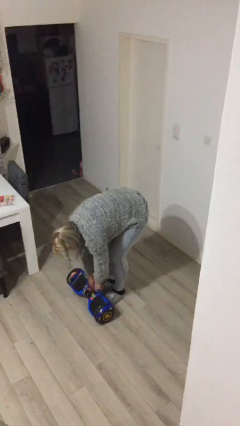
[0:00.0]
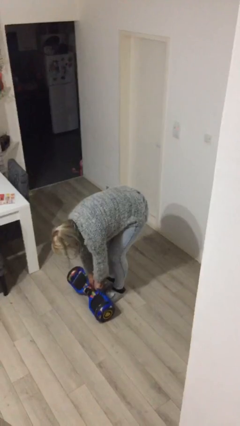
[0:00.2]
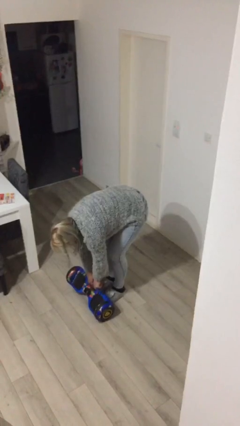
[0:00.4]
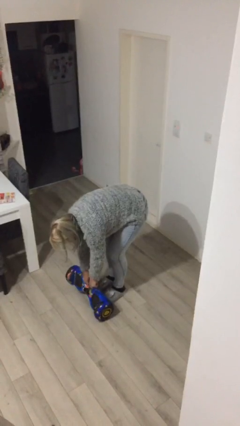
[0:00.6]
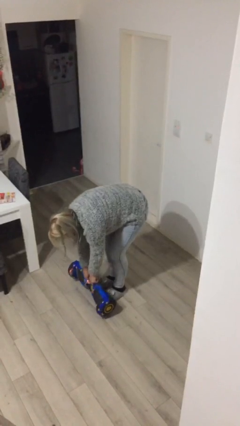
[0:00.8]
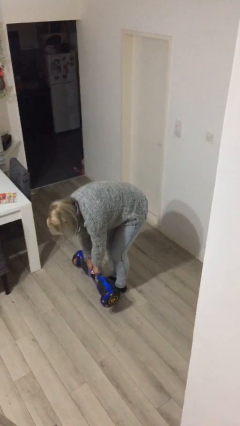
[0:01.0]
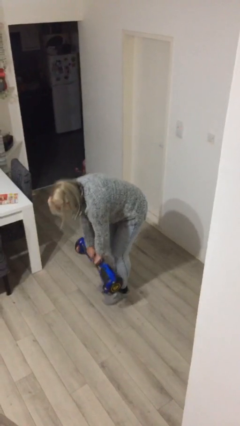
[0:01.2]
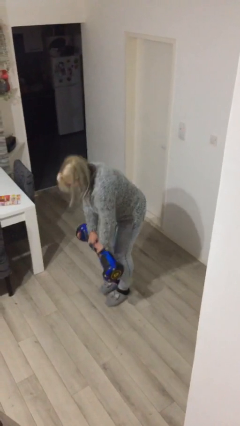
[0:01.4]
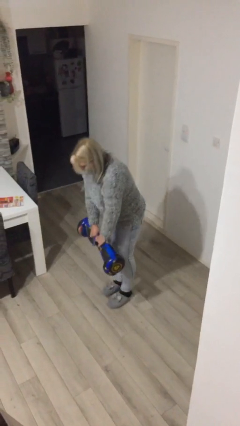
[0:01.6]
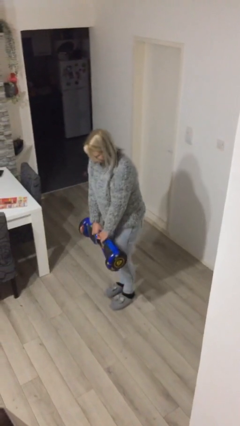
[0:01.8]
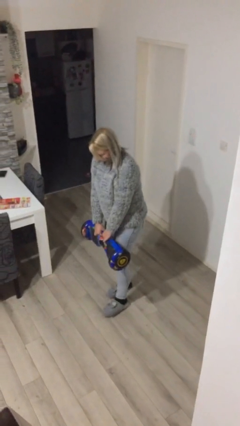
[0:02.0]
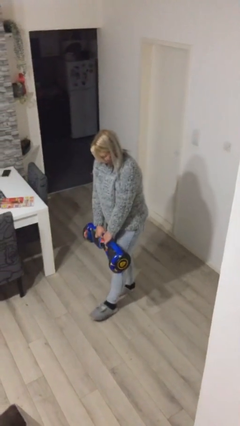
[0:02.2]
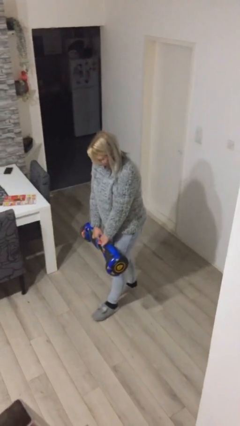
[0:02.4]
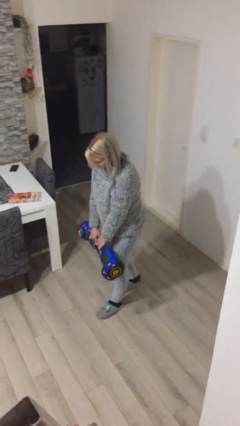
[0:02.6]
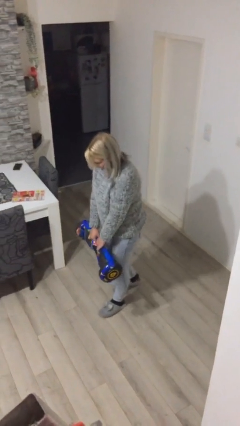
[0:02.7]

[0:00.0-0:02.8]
person picks up object from floor

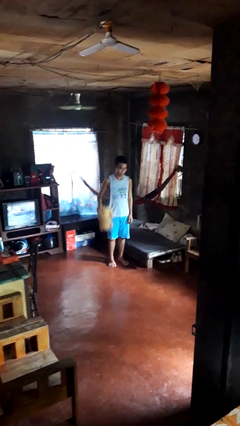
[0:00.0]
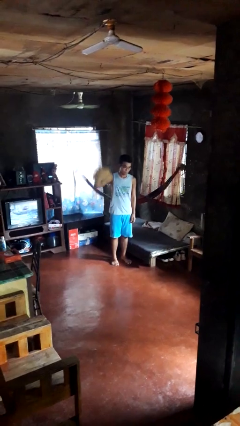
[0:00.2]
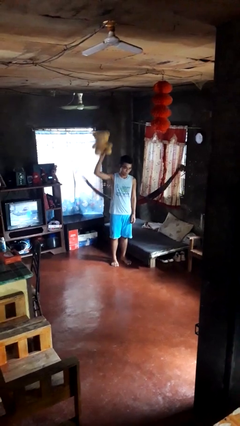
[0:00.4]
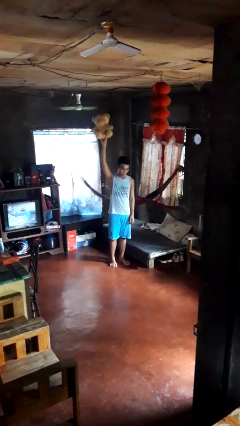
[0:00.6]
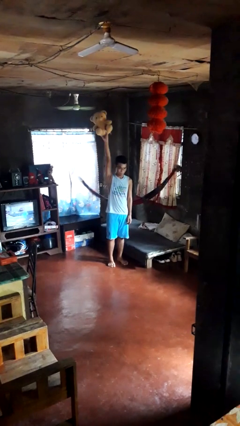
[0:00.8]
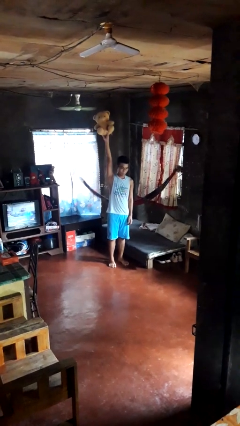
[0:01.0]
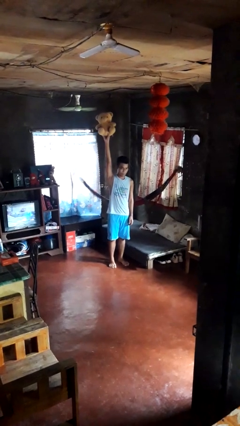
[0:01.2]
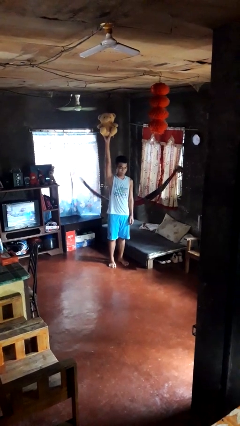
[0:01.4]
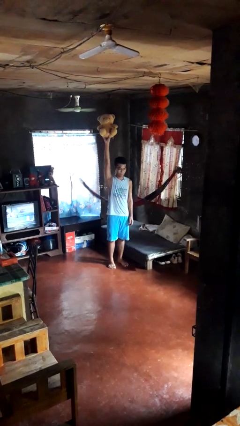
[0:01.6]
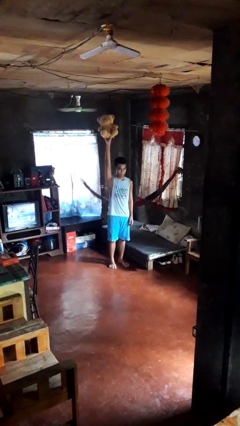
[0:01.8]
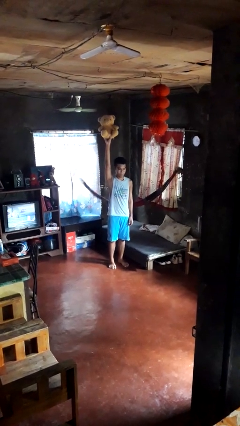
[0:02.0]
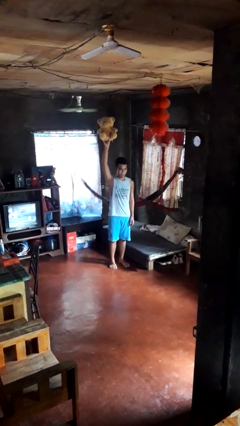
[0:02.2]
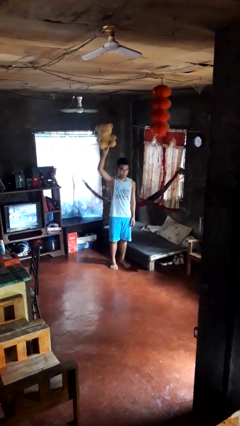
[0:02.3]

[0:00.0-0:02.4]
person holds object above head

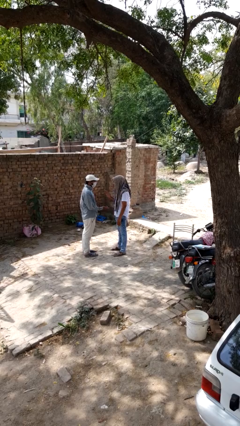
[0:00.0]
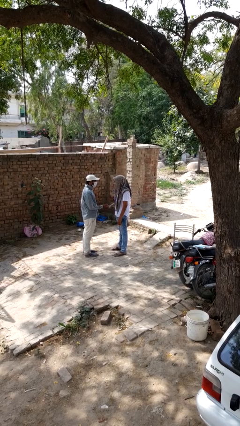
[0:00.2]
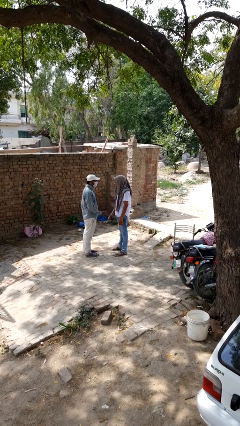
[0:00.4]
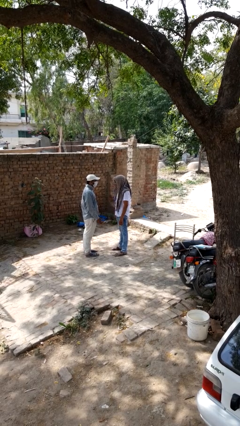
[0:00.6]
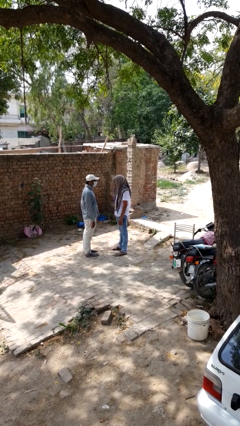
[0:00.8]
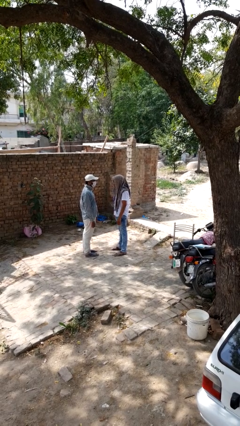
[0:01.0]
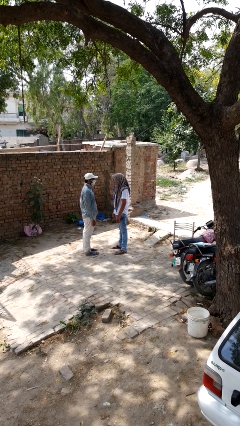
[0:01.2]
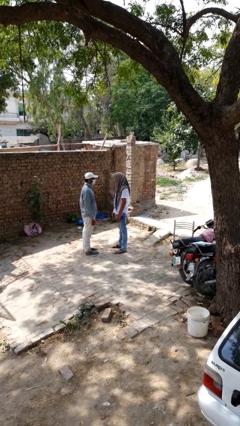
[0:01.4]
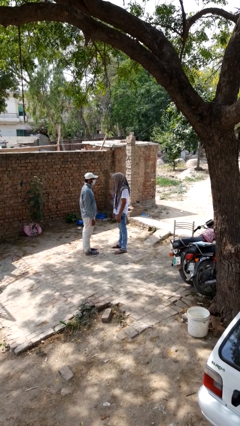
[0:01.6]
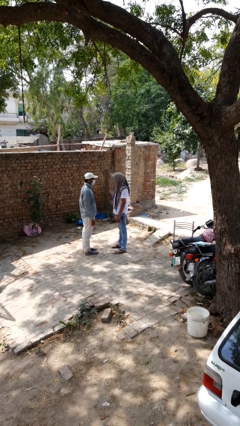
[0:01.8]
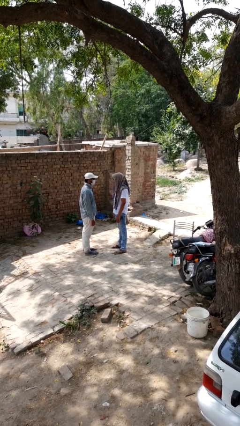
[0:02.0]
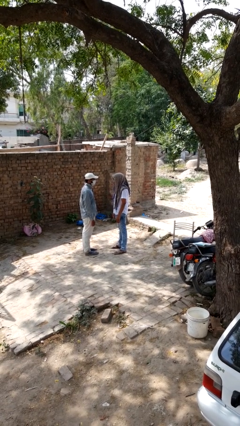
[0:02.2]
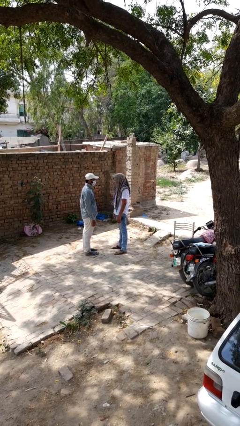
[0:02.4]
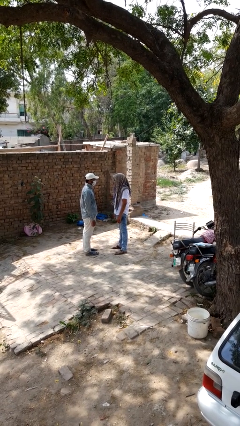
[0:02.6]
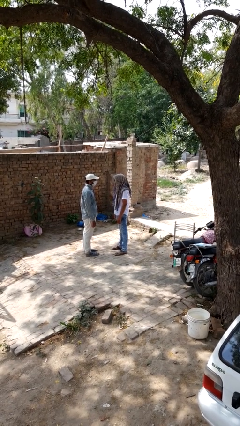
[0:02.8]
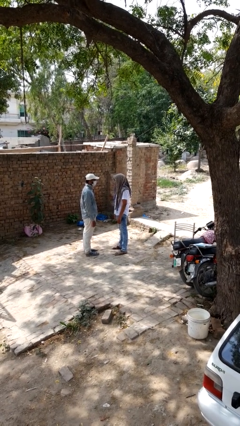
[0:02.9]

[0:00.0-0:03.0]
person highfives hand

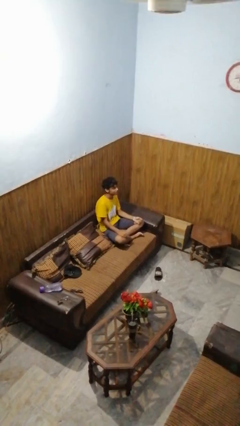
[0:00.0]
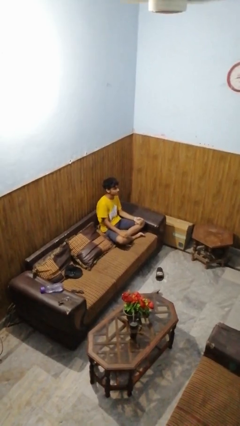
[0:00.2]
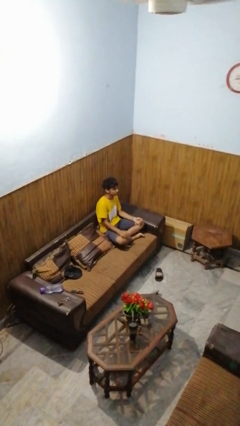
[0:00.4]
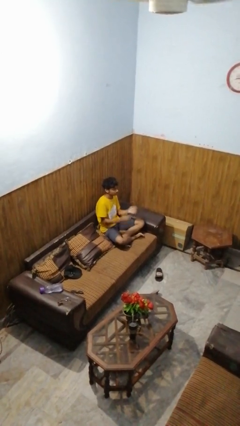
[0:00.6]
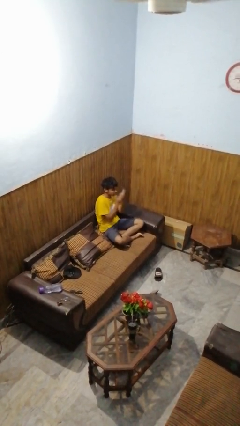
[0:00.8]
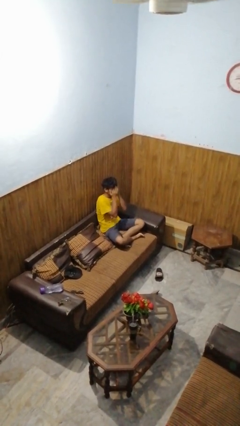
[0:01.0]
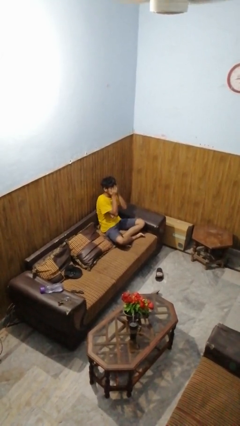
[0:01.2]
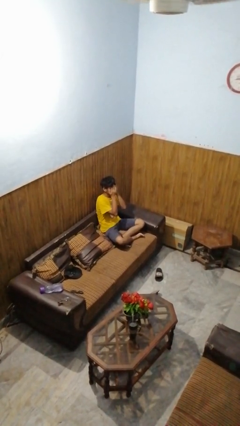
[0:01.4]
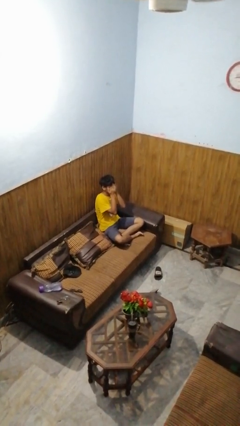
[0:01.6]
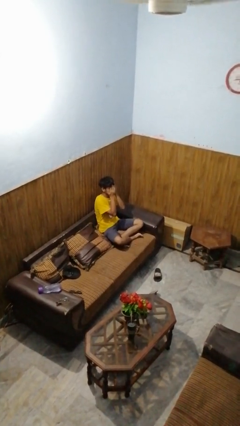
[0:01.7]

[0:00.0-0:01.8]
person covers face with hands

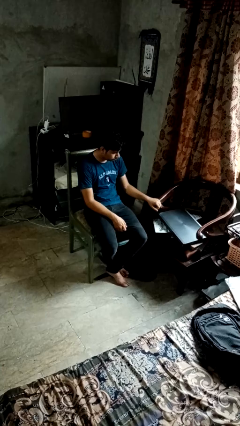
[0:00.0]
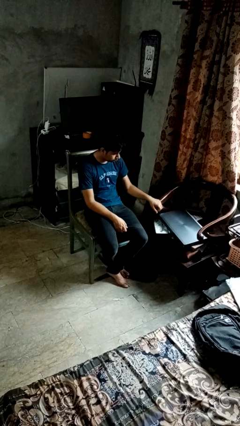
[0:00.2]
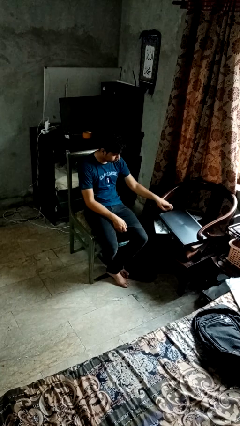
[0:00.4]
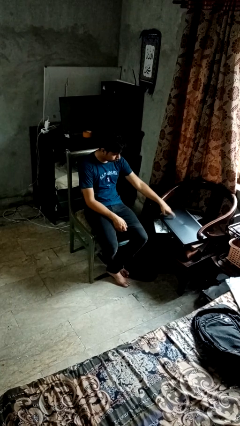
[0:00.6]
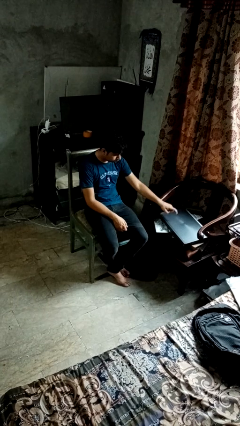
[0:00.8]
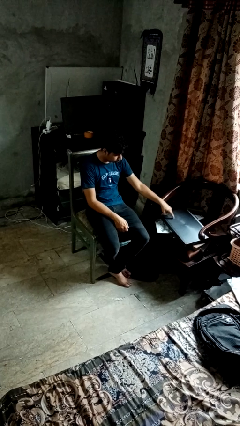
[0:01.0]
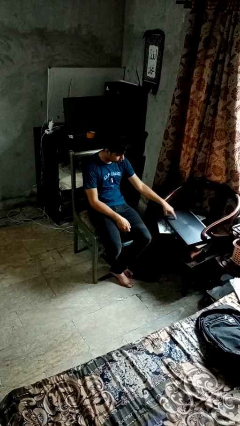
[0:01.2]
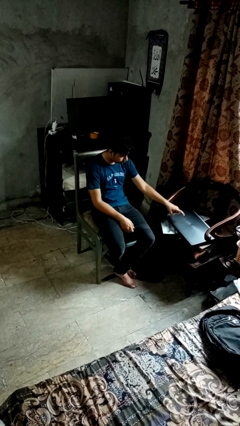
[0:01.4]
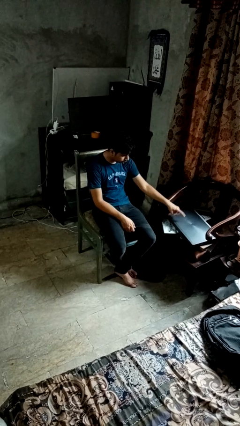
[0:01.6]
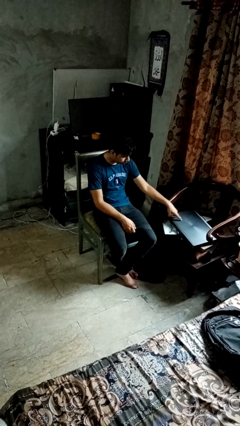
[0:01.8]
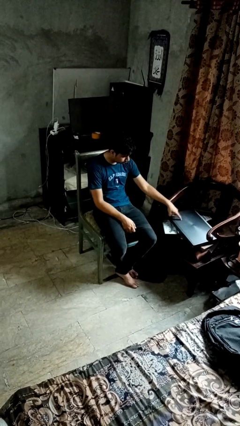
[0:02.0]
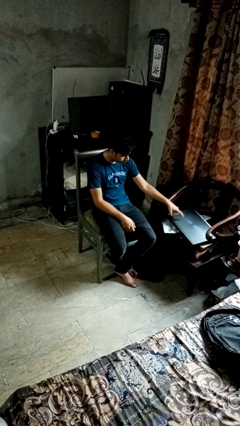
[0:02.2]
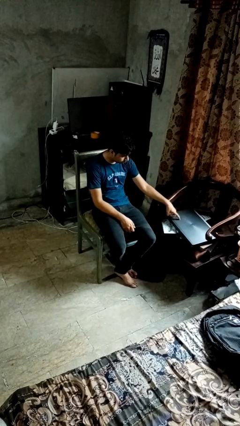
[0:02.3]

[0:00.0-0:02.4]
person taps object with finger

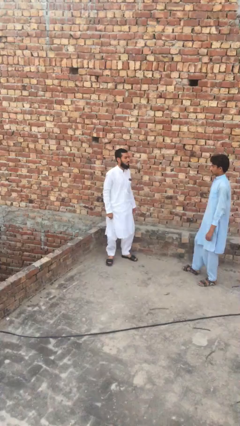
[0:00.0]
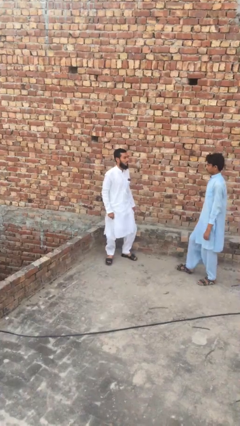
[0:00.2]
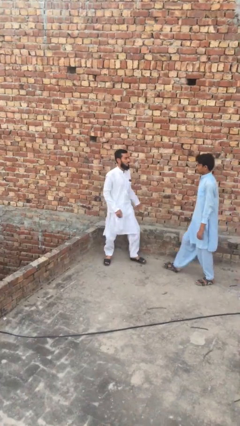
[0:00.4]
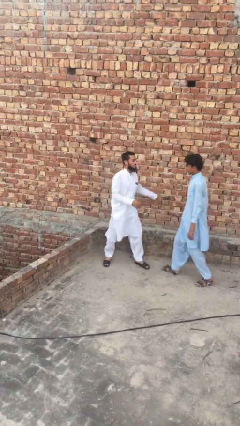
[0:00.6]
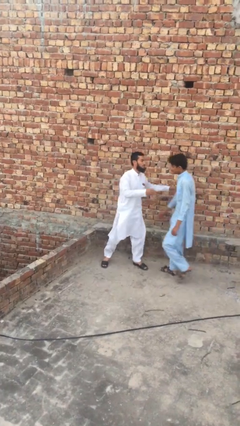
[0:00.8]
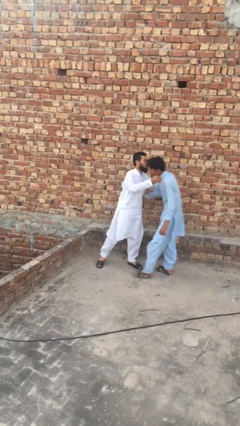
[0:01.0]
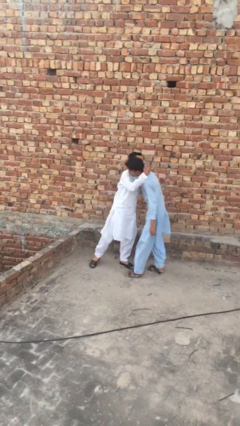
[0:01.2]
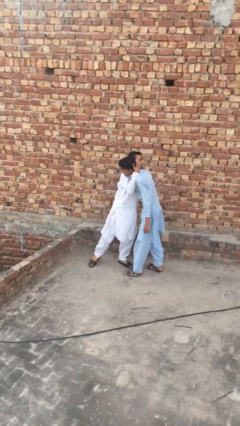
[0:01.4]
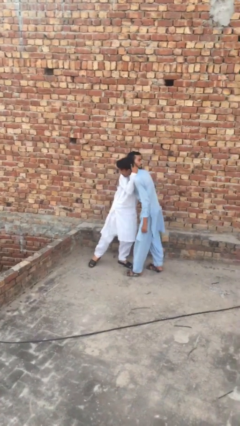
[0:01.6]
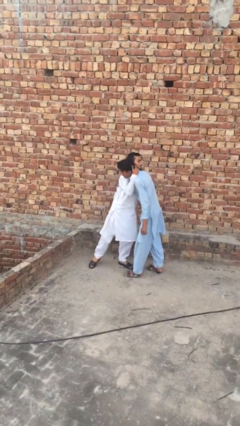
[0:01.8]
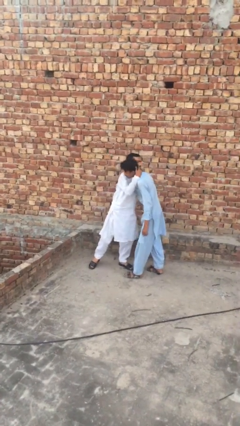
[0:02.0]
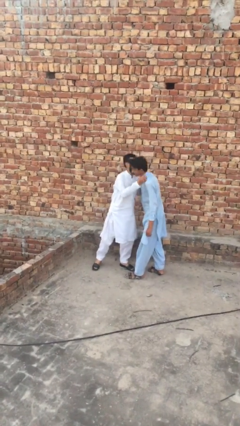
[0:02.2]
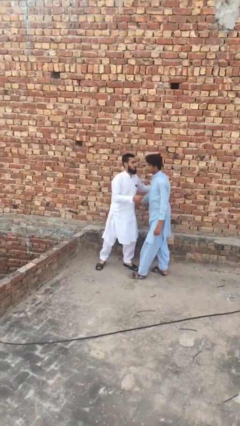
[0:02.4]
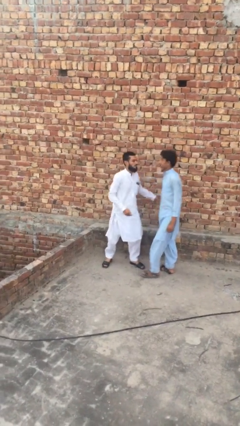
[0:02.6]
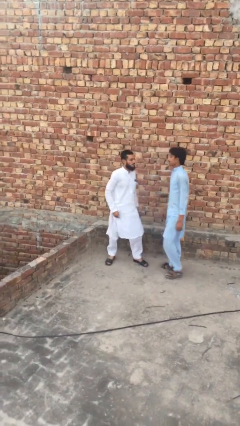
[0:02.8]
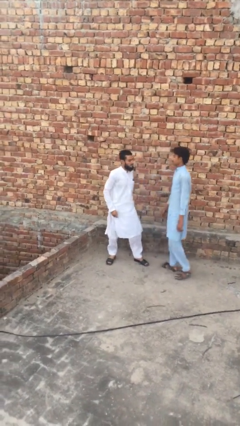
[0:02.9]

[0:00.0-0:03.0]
person embraces person

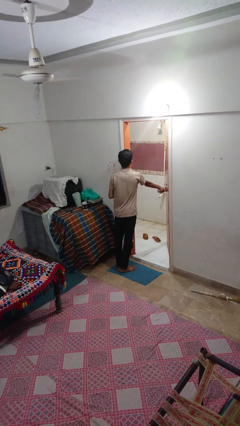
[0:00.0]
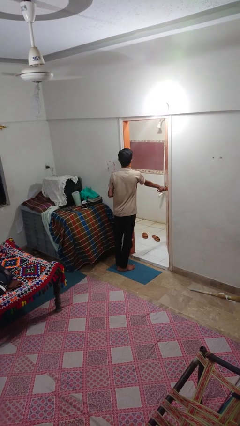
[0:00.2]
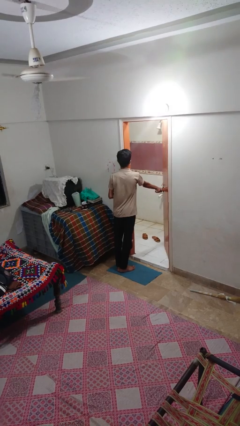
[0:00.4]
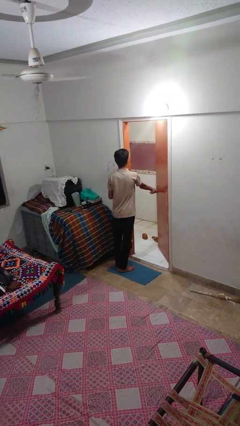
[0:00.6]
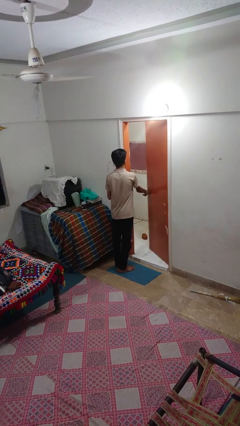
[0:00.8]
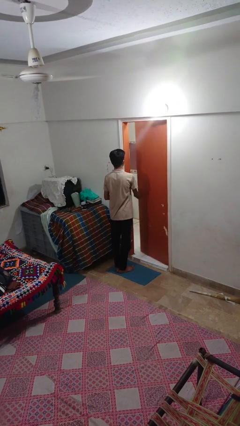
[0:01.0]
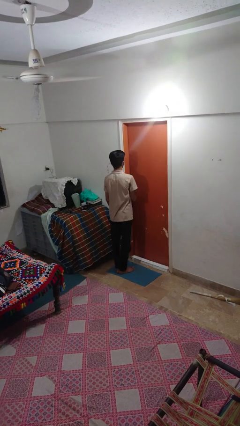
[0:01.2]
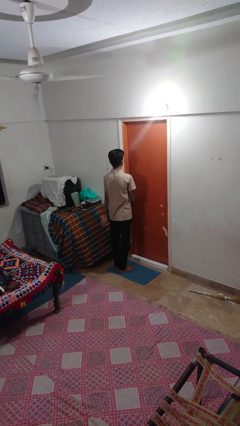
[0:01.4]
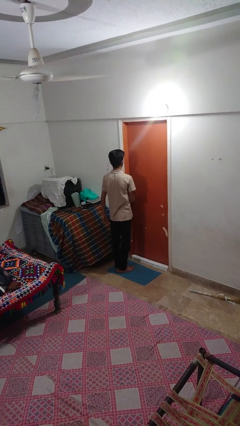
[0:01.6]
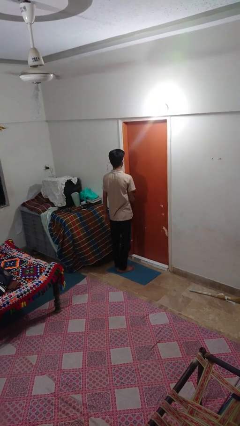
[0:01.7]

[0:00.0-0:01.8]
person closes facility door
